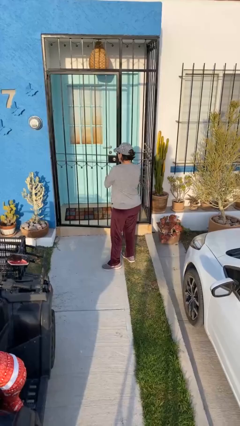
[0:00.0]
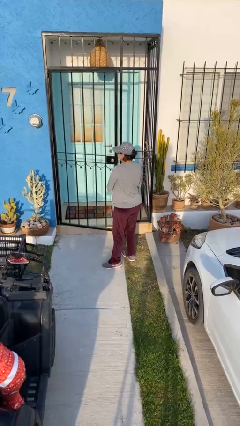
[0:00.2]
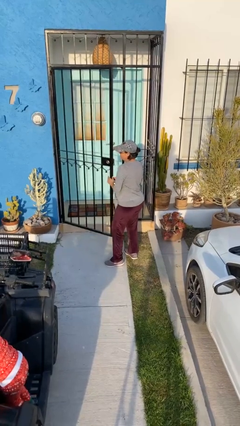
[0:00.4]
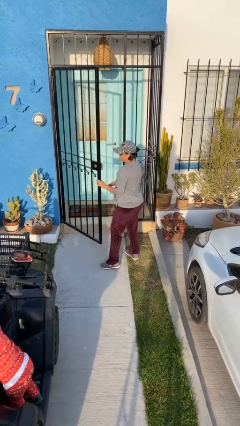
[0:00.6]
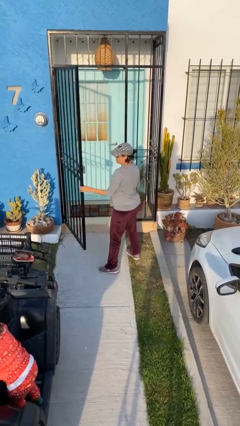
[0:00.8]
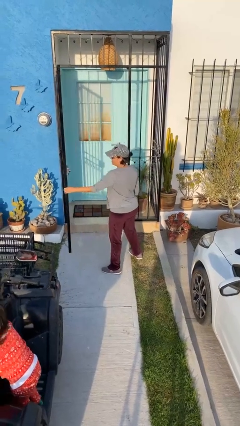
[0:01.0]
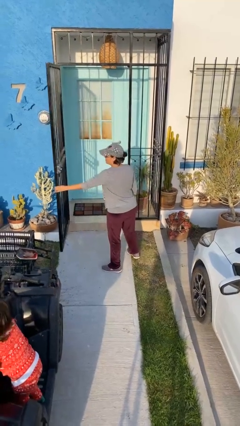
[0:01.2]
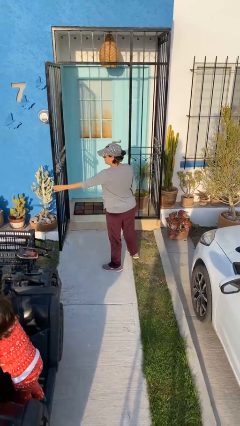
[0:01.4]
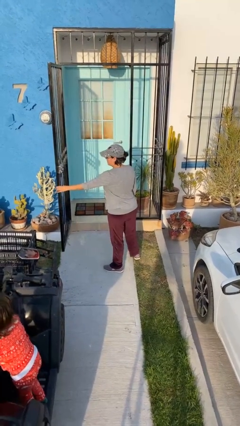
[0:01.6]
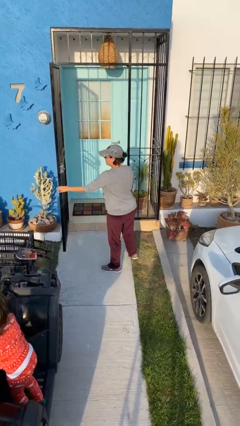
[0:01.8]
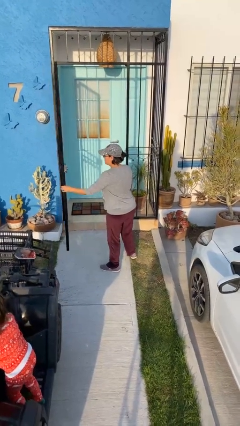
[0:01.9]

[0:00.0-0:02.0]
person opens facility door

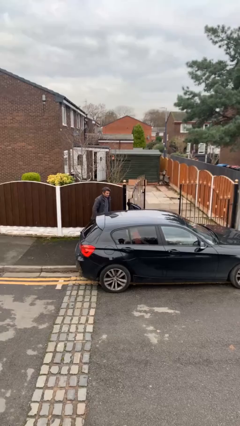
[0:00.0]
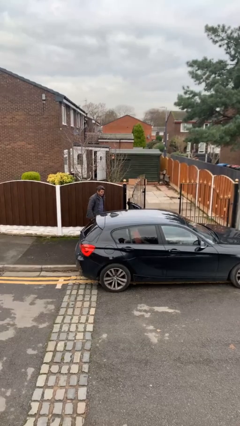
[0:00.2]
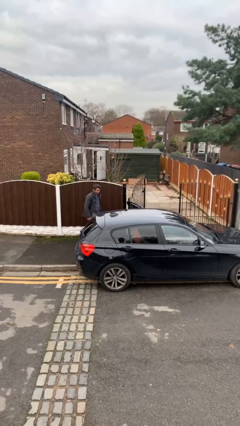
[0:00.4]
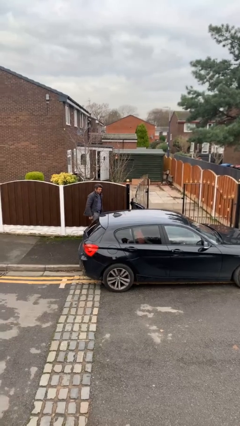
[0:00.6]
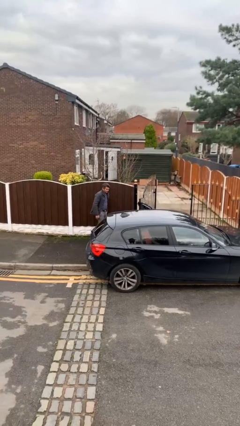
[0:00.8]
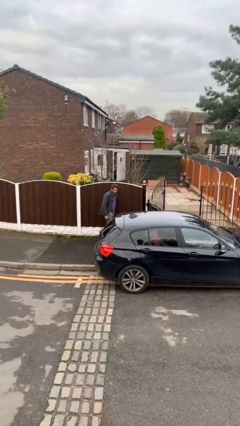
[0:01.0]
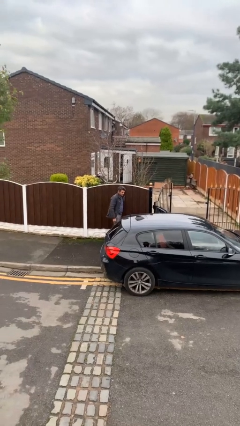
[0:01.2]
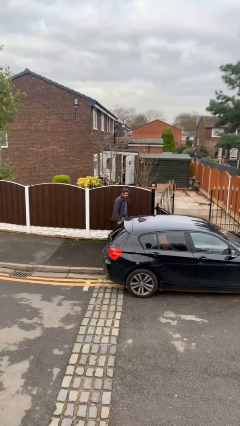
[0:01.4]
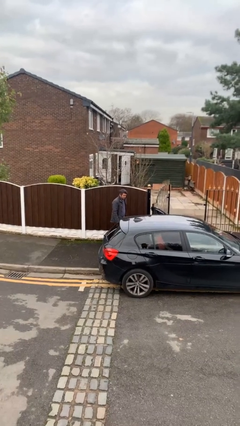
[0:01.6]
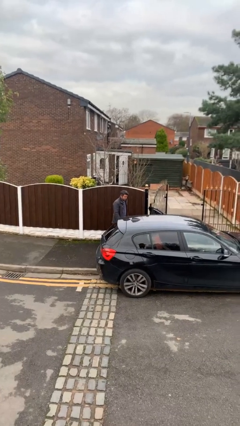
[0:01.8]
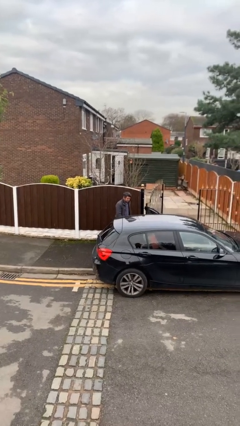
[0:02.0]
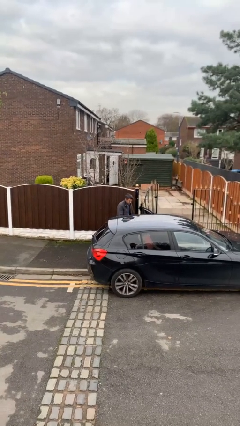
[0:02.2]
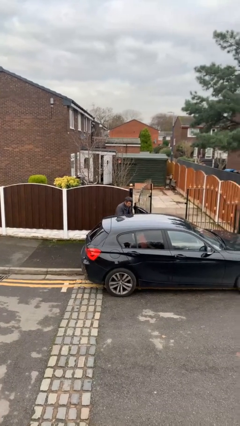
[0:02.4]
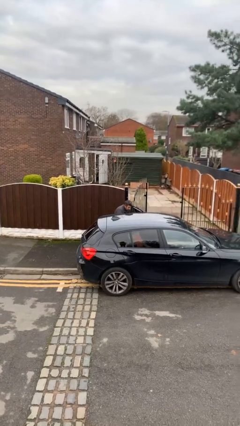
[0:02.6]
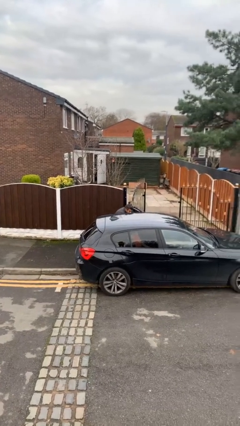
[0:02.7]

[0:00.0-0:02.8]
person unloads car

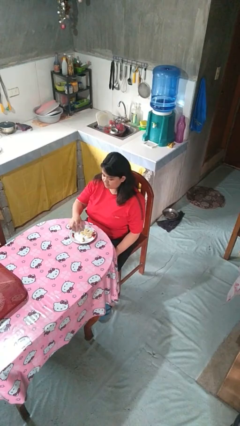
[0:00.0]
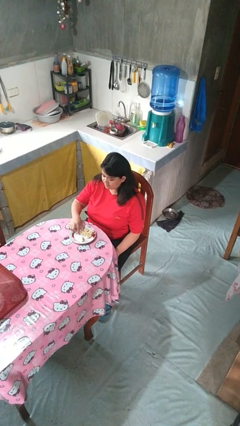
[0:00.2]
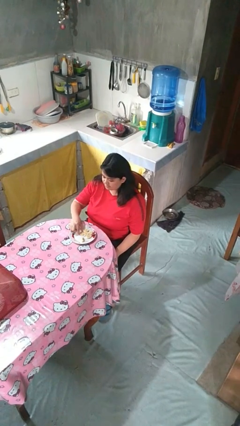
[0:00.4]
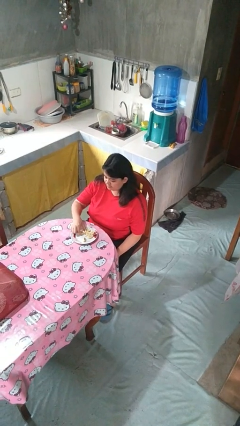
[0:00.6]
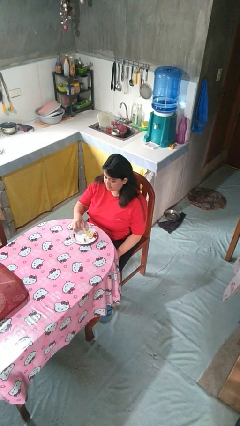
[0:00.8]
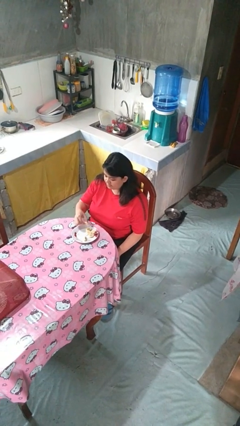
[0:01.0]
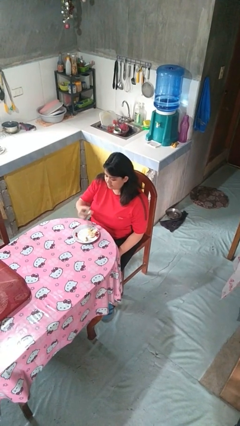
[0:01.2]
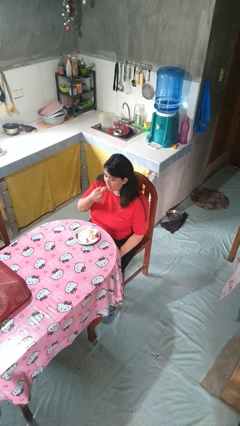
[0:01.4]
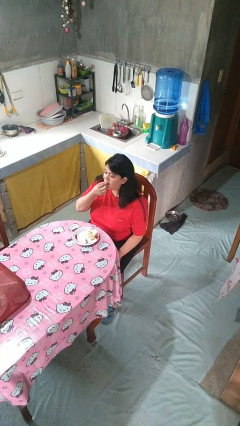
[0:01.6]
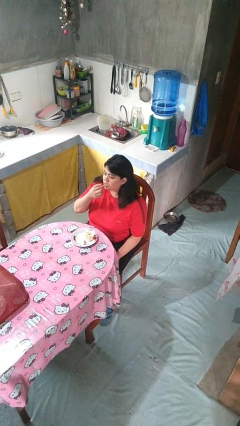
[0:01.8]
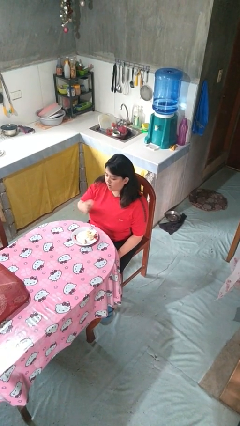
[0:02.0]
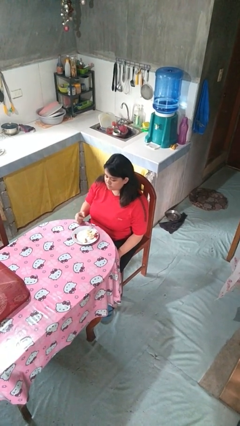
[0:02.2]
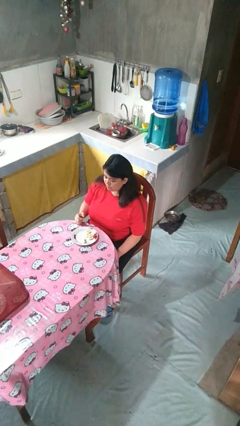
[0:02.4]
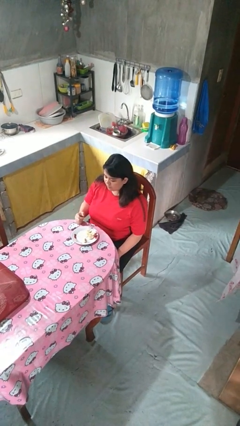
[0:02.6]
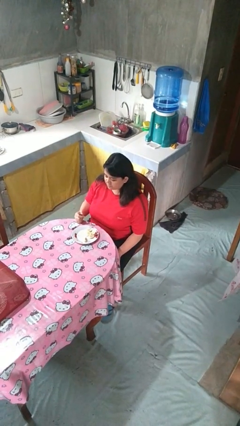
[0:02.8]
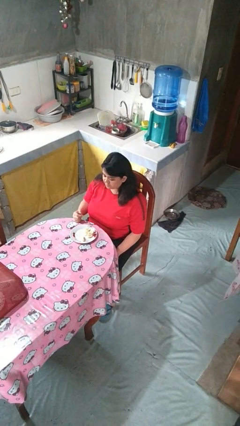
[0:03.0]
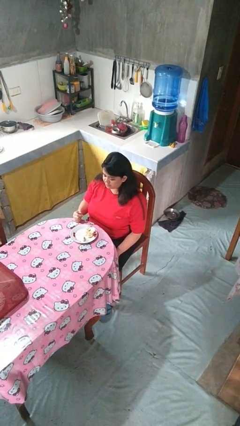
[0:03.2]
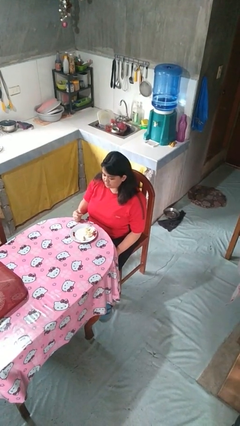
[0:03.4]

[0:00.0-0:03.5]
person eats with hands

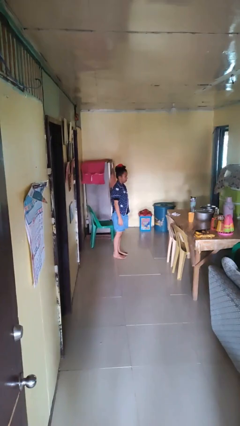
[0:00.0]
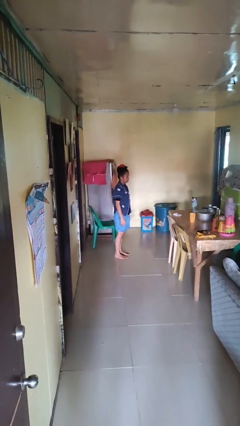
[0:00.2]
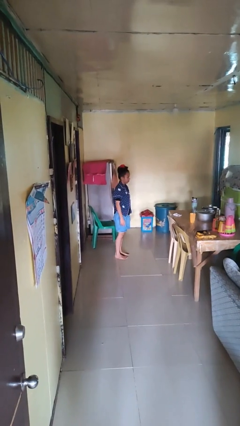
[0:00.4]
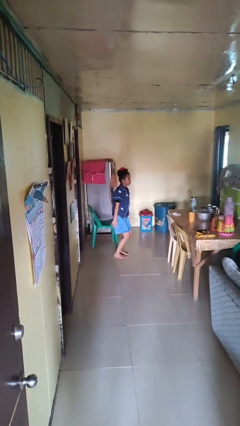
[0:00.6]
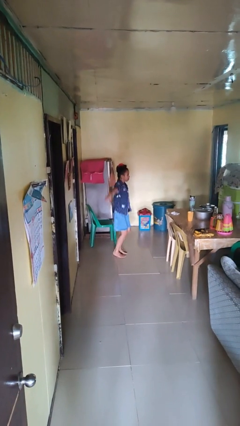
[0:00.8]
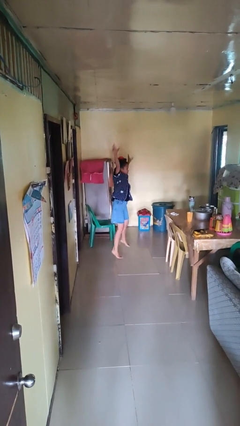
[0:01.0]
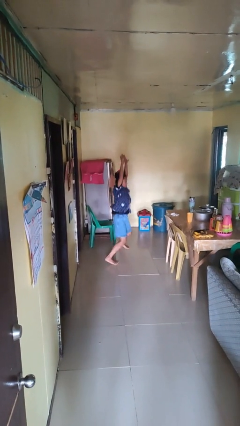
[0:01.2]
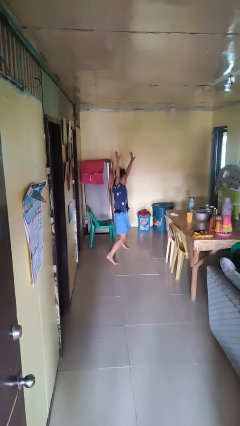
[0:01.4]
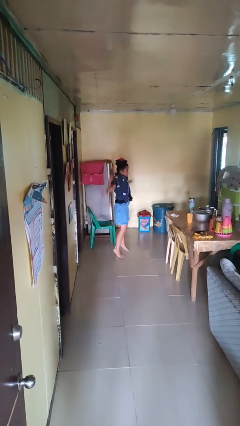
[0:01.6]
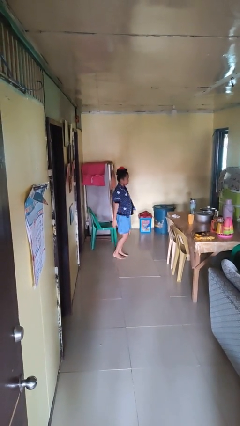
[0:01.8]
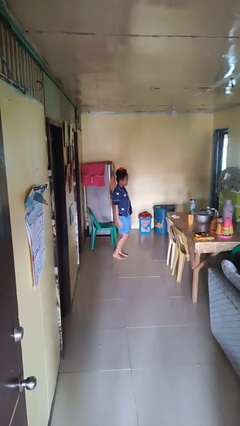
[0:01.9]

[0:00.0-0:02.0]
person exercises with jumping jacks

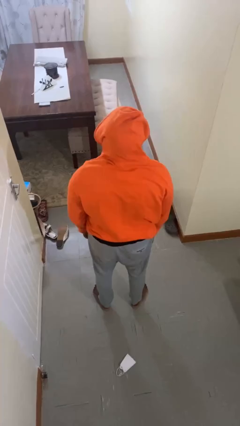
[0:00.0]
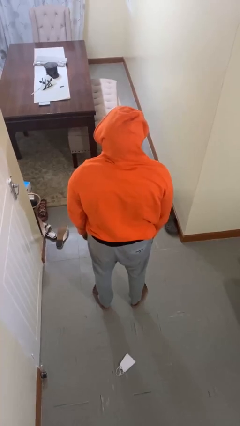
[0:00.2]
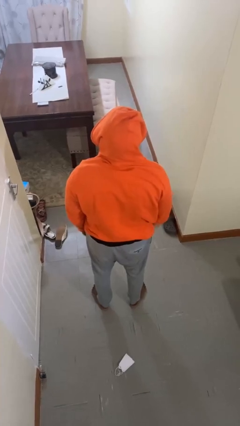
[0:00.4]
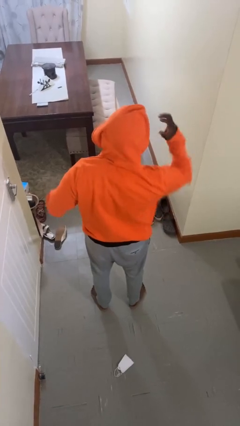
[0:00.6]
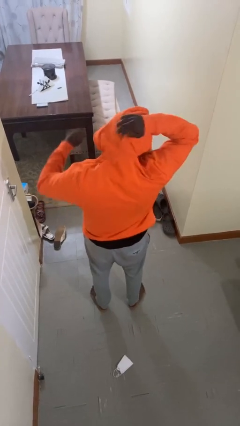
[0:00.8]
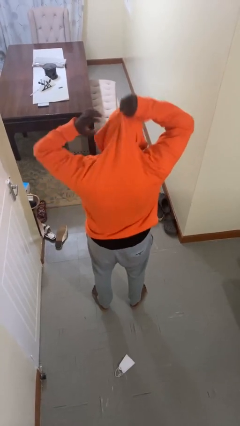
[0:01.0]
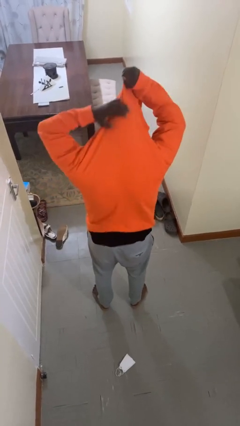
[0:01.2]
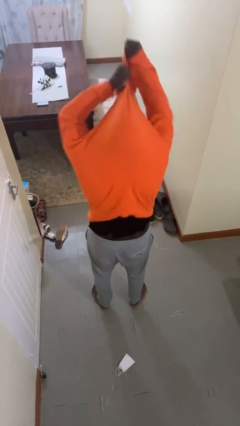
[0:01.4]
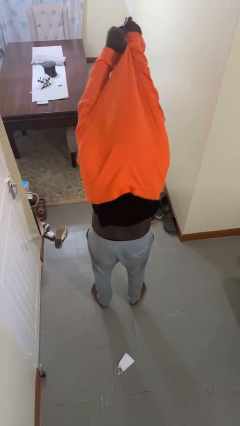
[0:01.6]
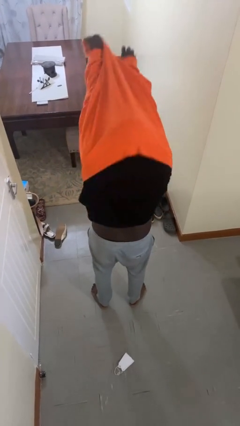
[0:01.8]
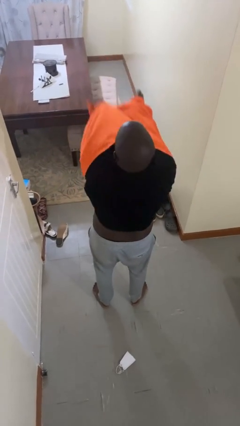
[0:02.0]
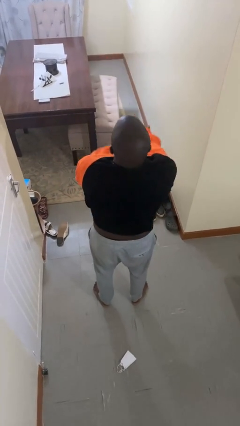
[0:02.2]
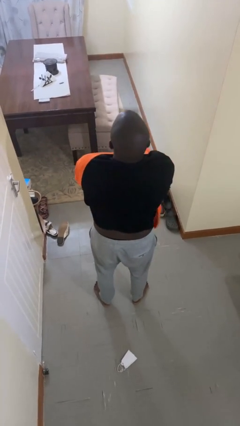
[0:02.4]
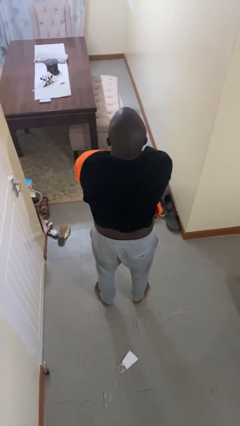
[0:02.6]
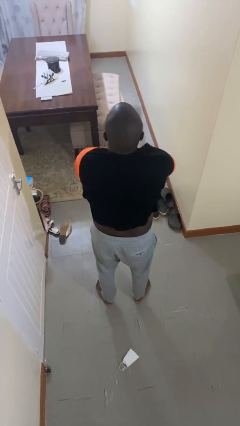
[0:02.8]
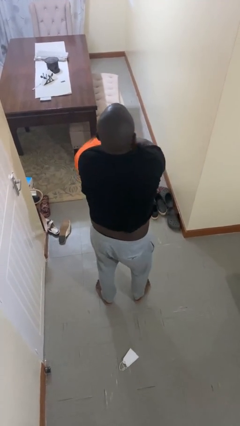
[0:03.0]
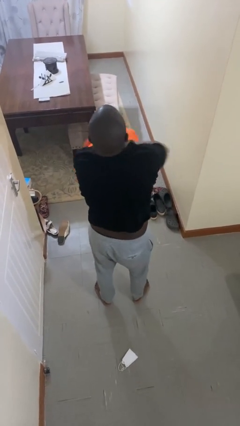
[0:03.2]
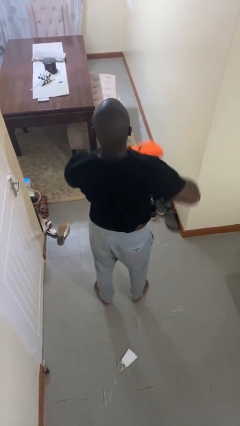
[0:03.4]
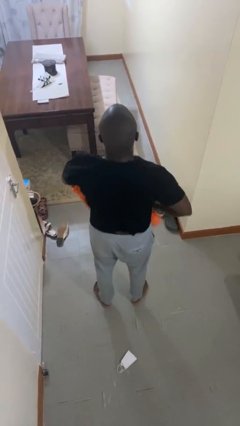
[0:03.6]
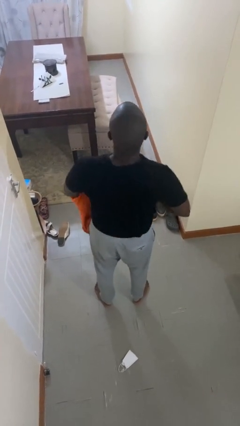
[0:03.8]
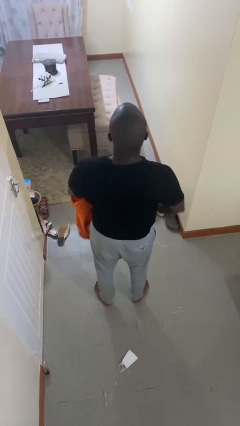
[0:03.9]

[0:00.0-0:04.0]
person takes off hoodie

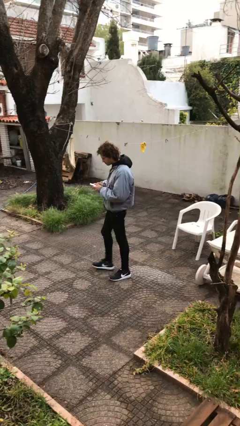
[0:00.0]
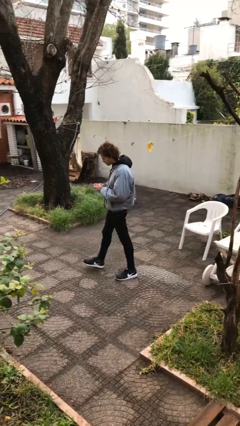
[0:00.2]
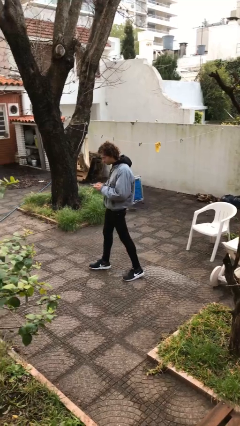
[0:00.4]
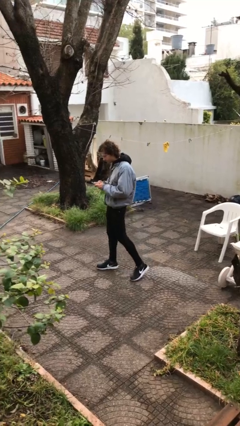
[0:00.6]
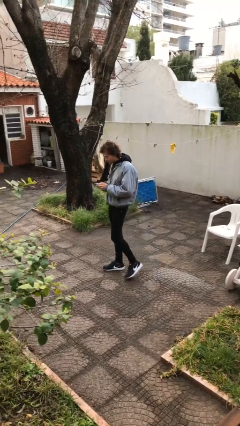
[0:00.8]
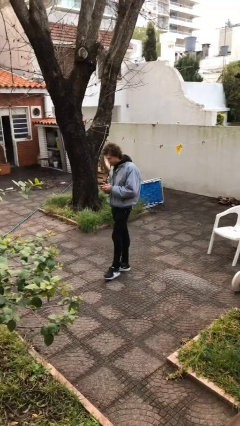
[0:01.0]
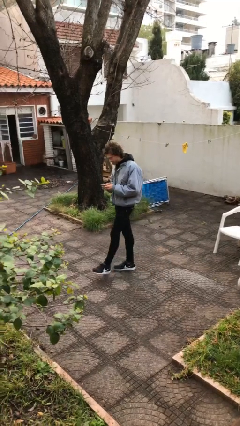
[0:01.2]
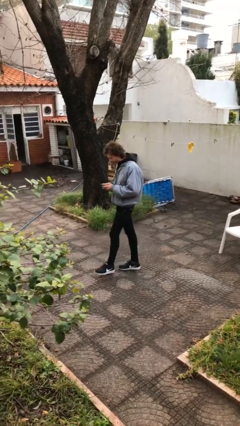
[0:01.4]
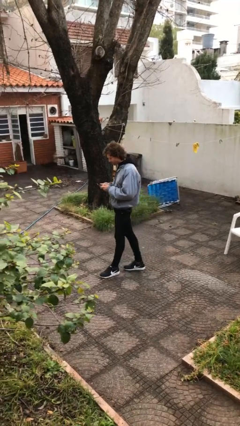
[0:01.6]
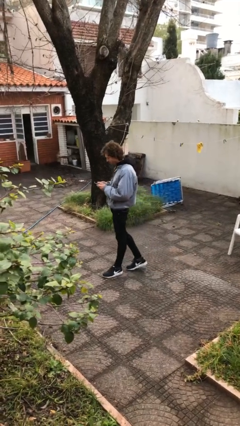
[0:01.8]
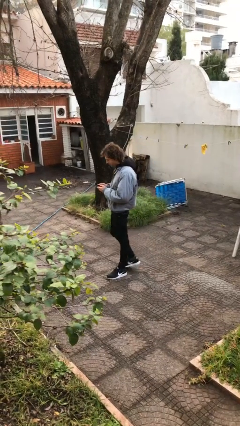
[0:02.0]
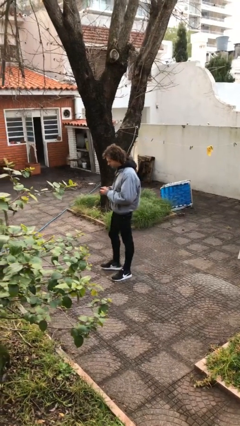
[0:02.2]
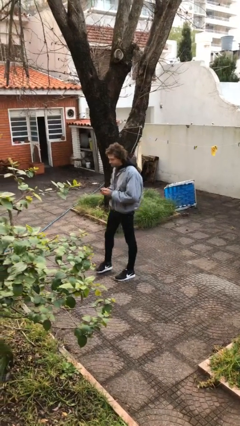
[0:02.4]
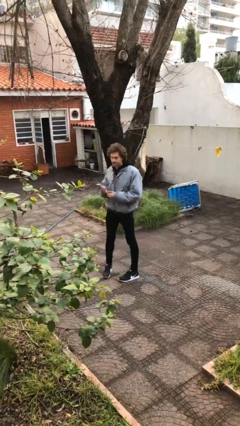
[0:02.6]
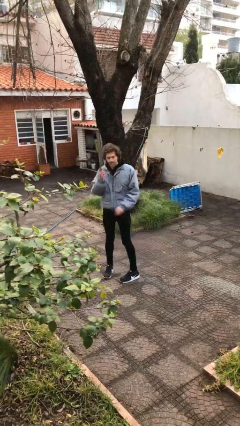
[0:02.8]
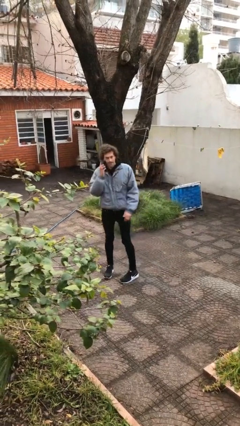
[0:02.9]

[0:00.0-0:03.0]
person texts on phone
